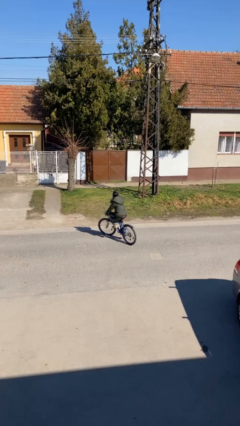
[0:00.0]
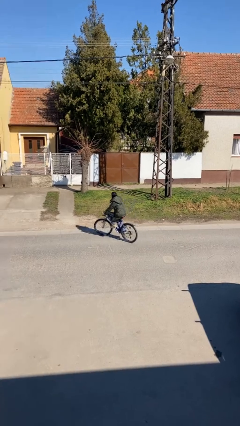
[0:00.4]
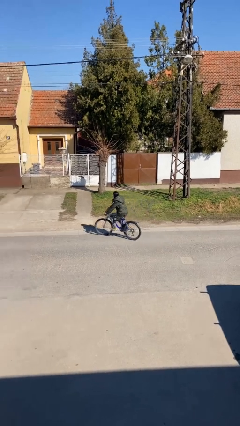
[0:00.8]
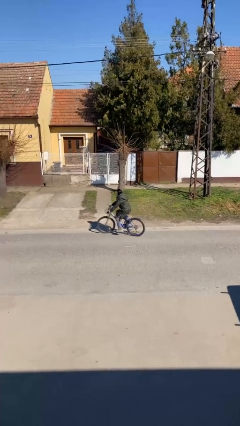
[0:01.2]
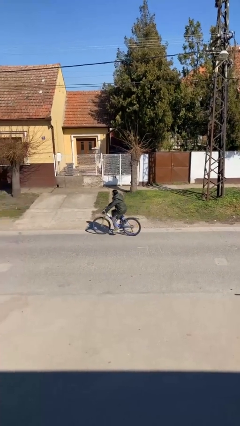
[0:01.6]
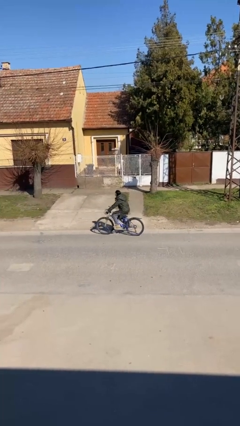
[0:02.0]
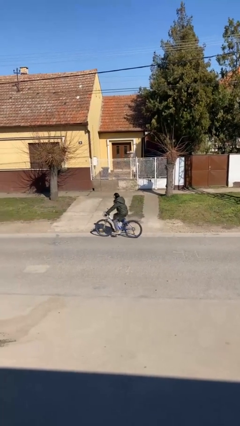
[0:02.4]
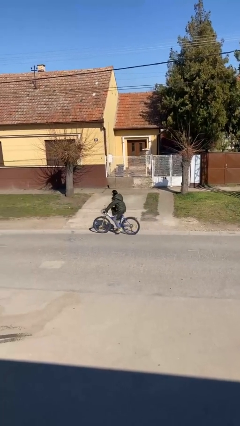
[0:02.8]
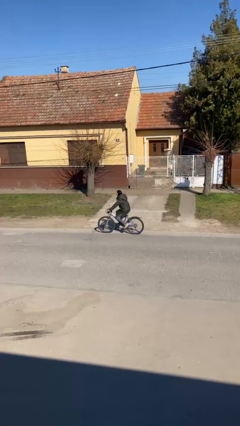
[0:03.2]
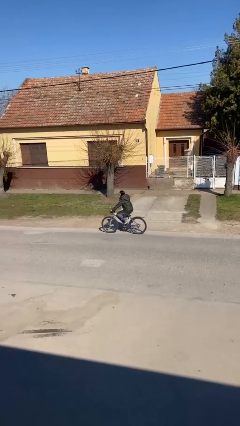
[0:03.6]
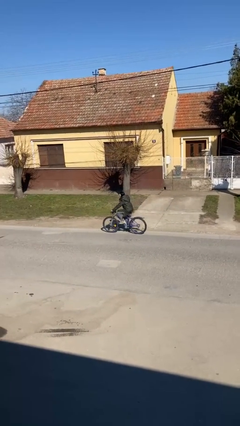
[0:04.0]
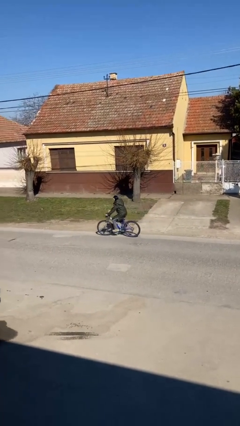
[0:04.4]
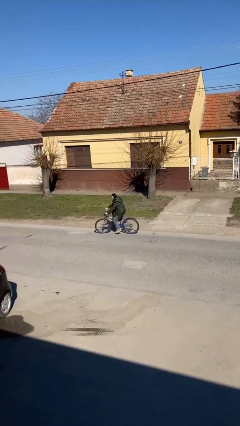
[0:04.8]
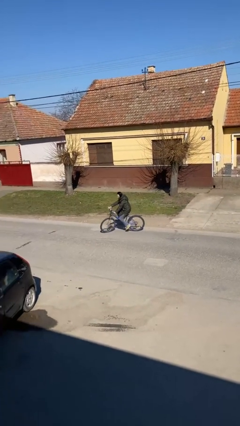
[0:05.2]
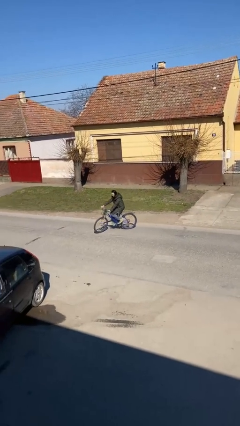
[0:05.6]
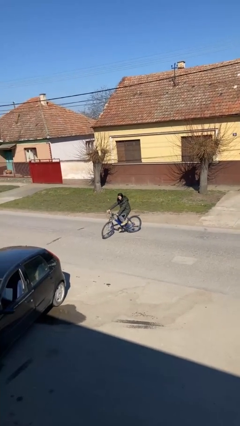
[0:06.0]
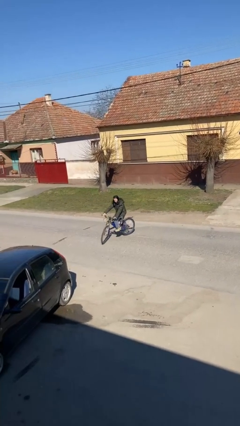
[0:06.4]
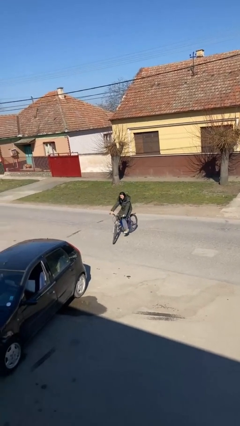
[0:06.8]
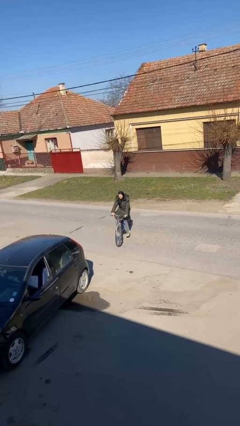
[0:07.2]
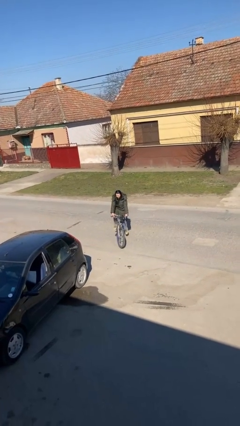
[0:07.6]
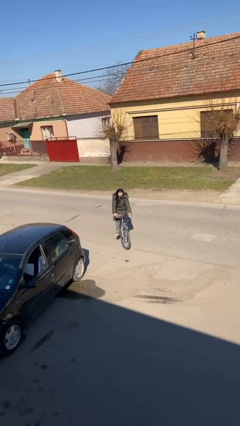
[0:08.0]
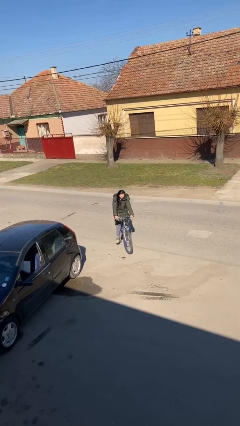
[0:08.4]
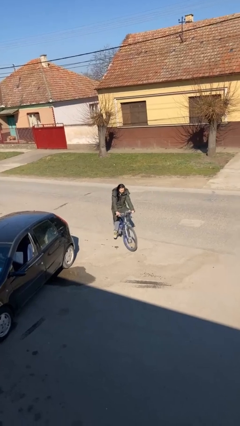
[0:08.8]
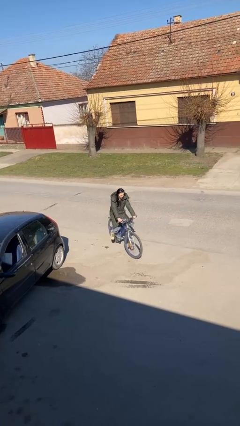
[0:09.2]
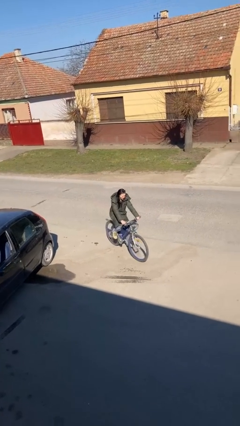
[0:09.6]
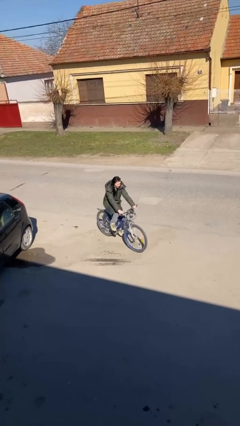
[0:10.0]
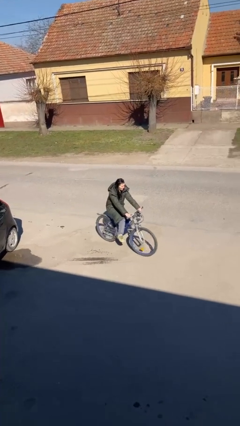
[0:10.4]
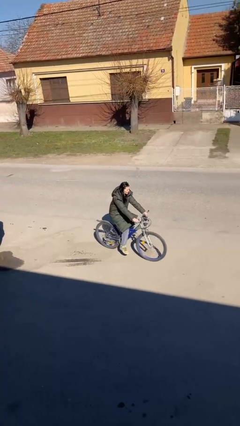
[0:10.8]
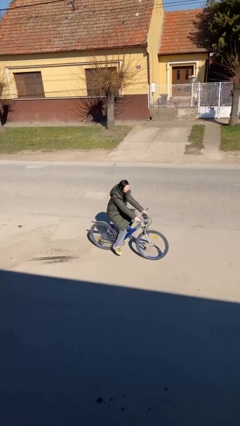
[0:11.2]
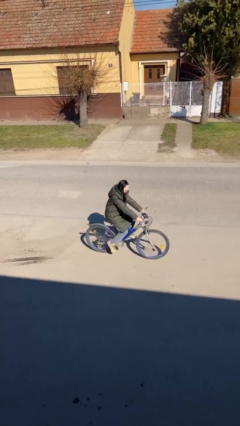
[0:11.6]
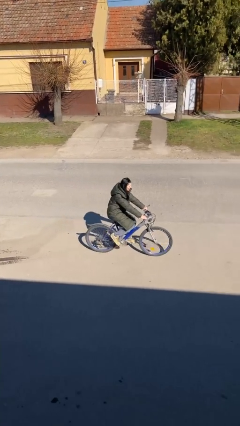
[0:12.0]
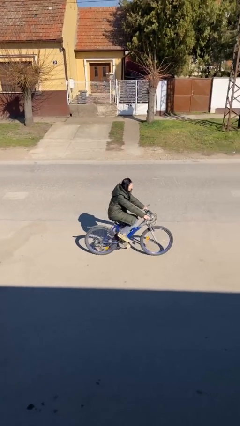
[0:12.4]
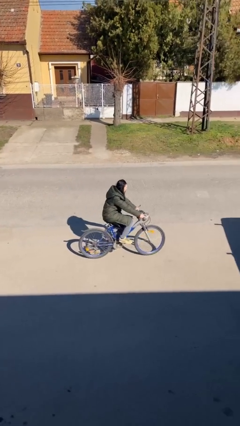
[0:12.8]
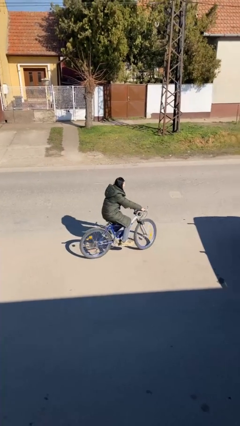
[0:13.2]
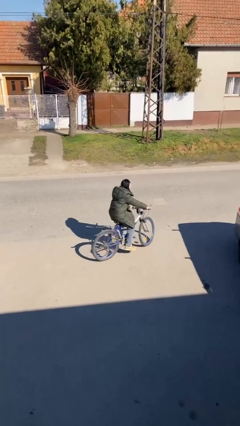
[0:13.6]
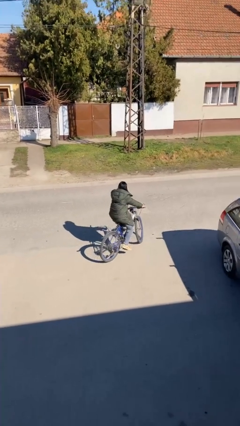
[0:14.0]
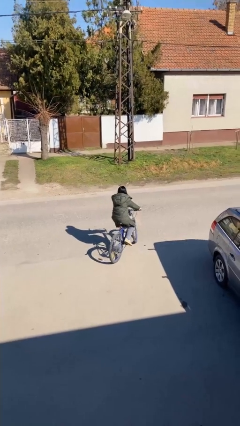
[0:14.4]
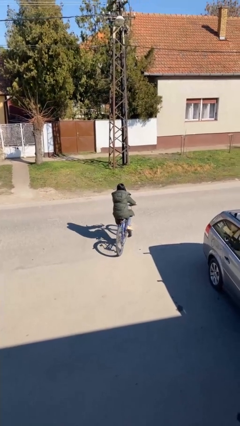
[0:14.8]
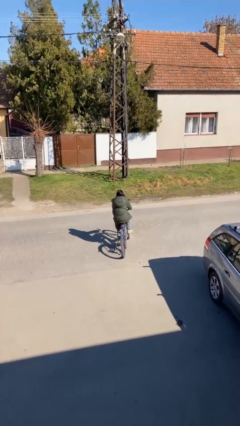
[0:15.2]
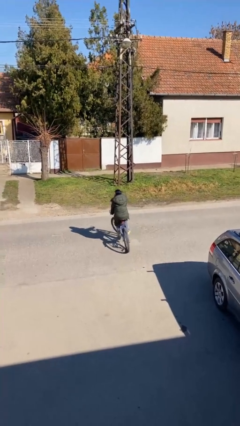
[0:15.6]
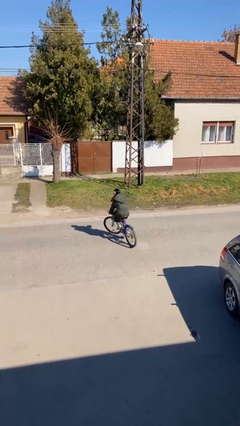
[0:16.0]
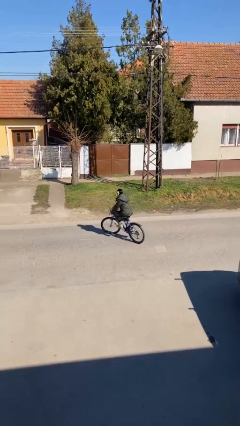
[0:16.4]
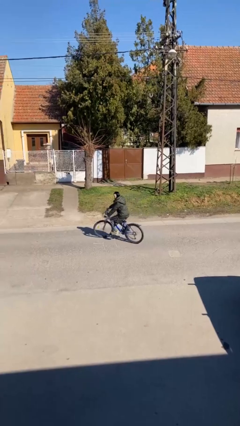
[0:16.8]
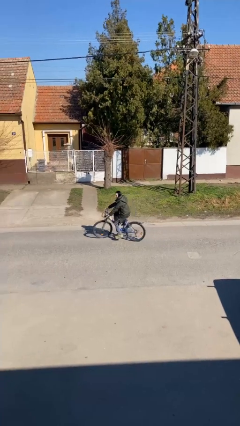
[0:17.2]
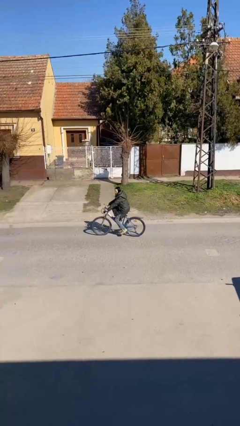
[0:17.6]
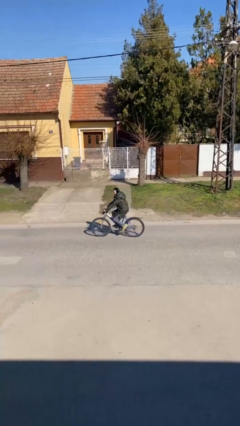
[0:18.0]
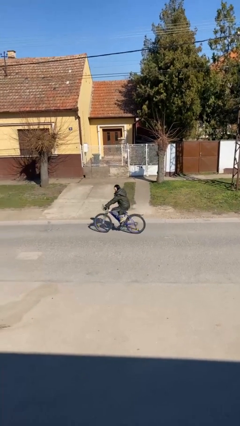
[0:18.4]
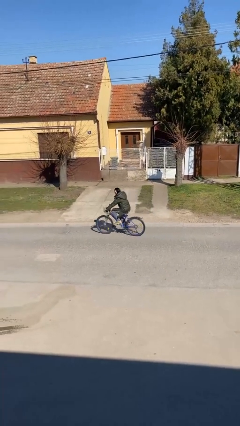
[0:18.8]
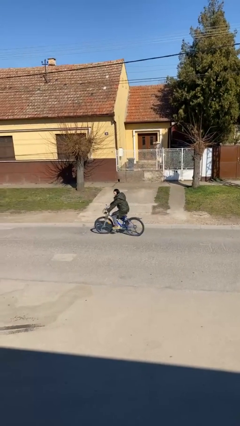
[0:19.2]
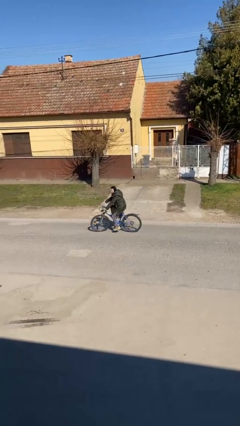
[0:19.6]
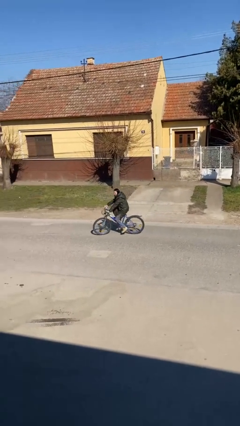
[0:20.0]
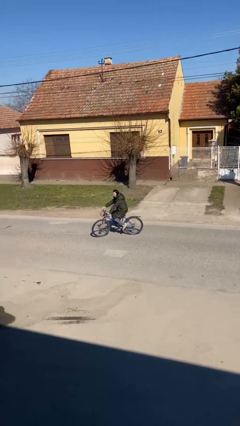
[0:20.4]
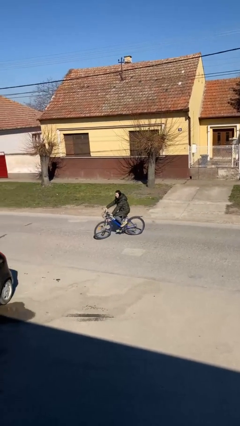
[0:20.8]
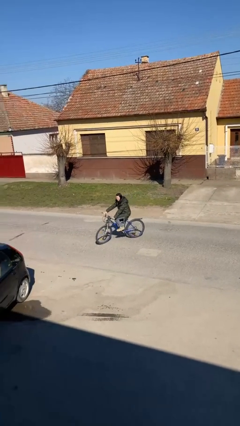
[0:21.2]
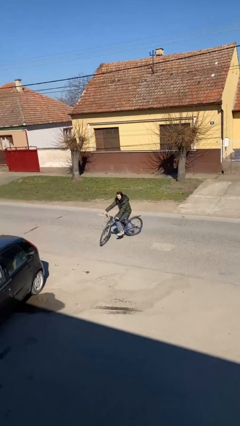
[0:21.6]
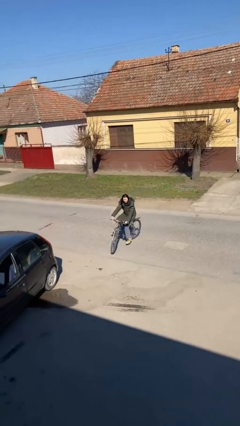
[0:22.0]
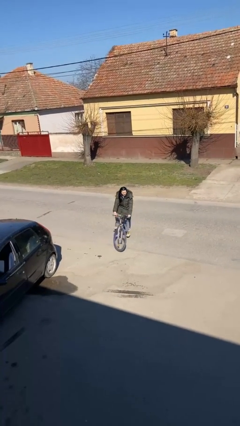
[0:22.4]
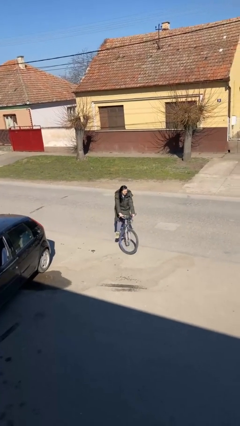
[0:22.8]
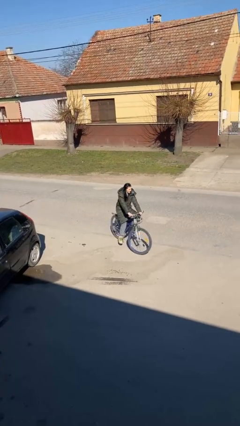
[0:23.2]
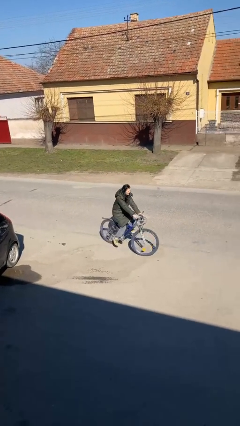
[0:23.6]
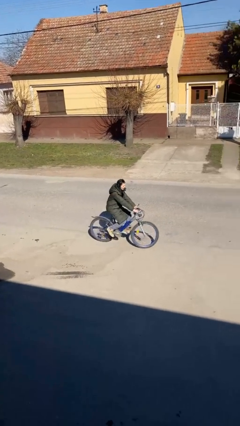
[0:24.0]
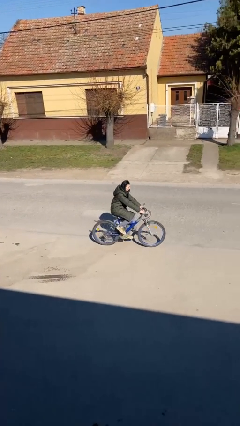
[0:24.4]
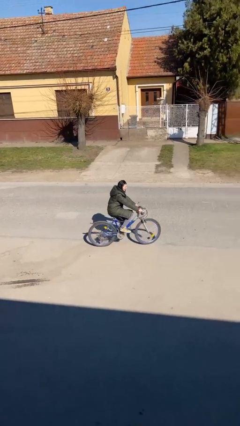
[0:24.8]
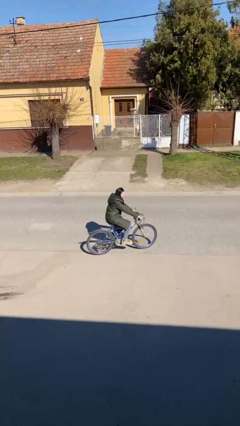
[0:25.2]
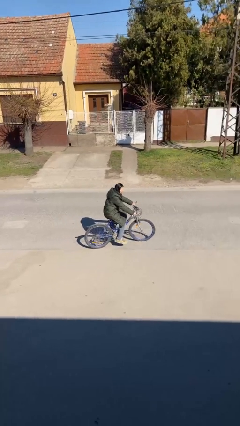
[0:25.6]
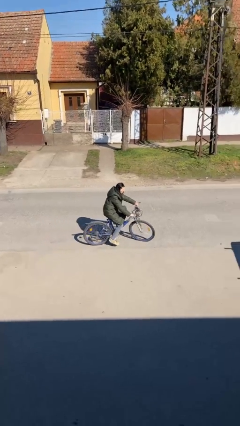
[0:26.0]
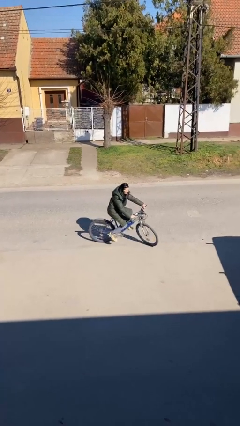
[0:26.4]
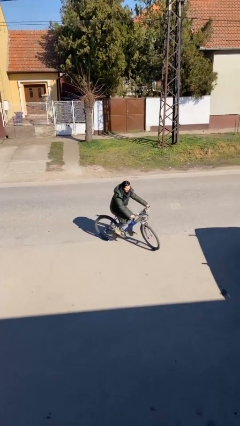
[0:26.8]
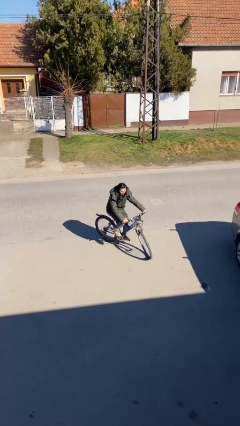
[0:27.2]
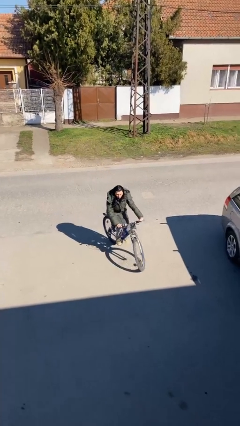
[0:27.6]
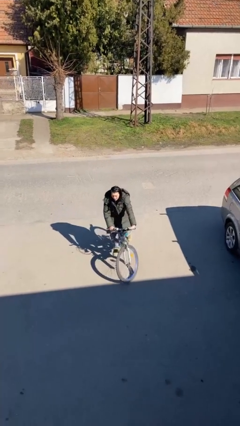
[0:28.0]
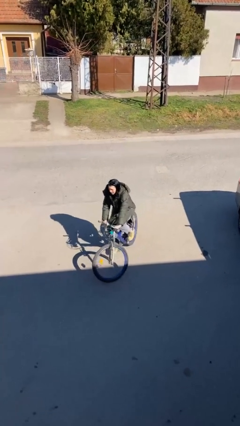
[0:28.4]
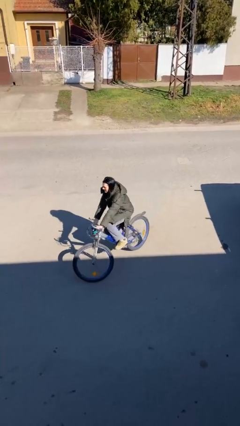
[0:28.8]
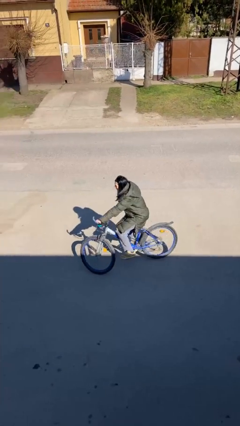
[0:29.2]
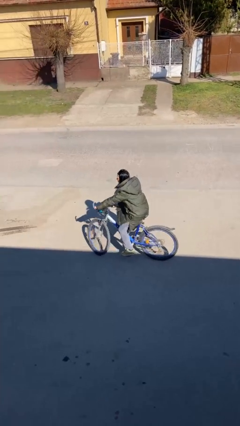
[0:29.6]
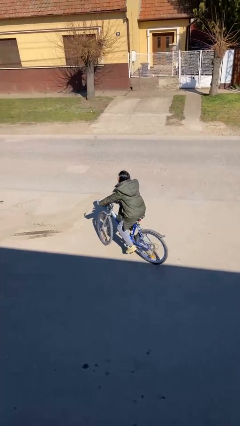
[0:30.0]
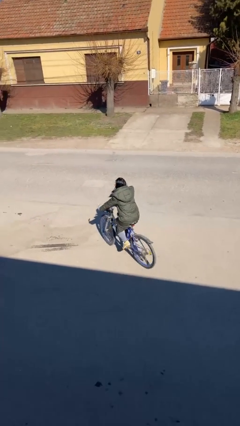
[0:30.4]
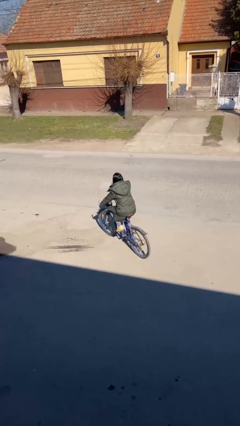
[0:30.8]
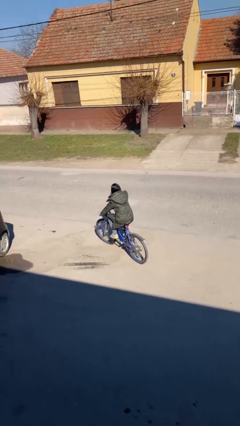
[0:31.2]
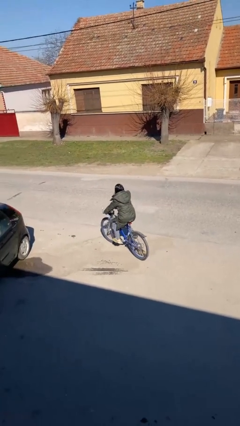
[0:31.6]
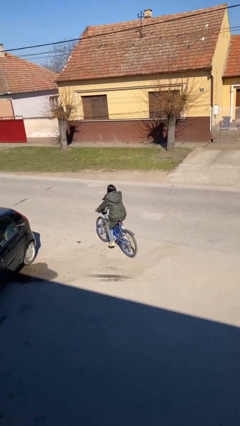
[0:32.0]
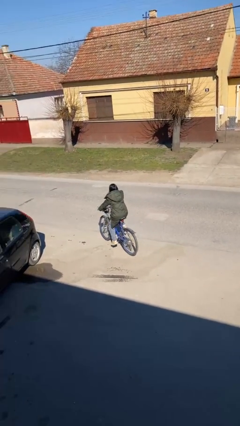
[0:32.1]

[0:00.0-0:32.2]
person rides bicycle

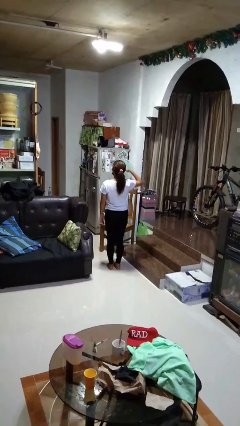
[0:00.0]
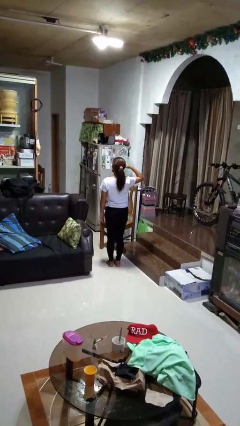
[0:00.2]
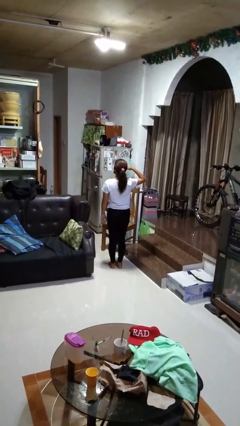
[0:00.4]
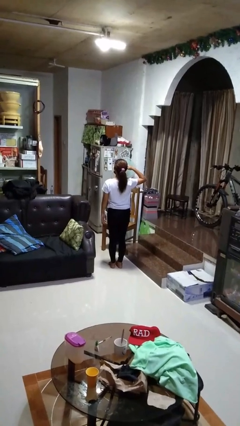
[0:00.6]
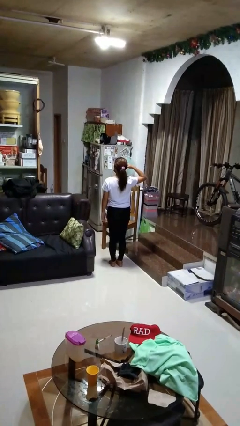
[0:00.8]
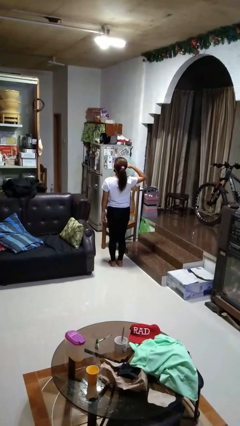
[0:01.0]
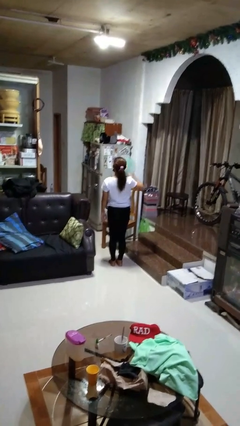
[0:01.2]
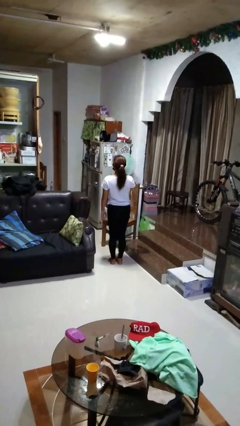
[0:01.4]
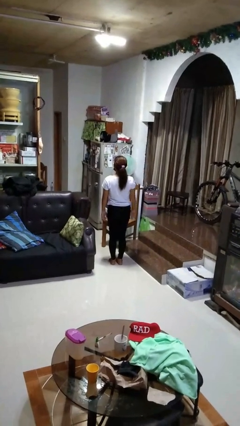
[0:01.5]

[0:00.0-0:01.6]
person salutes

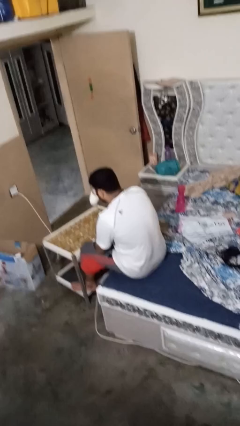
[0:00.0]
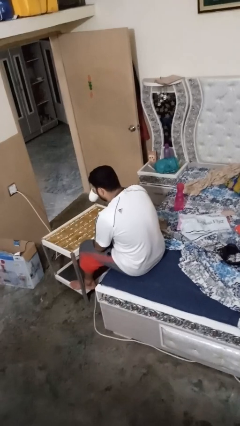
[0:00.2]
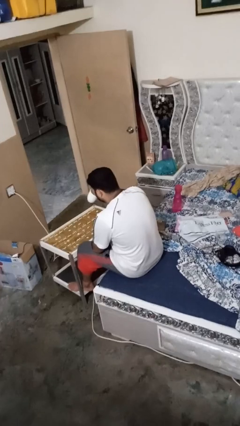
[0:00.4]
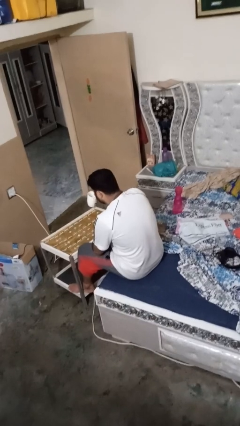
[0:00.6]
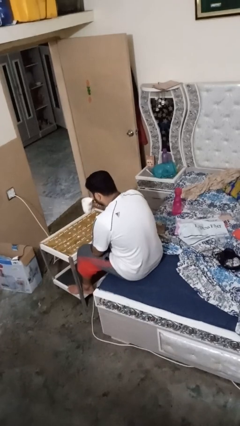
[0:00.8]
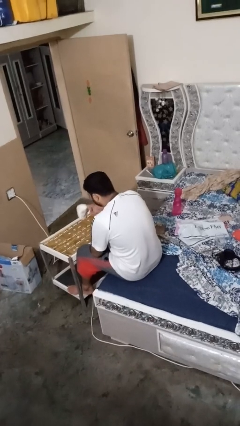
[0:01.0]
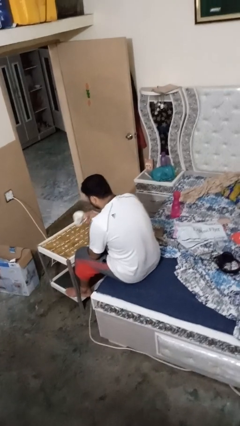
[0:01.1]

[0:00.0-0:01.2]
person puts down object on table
